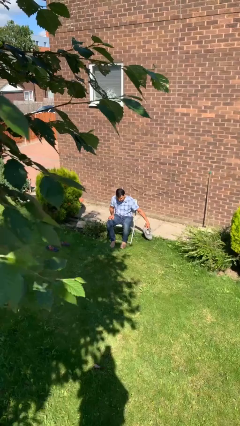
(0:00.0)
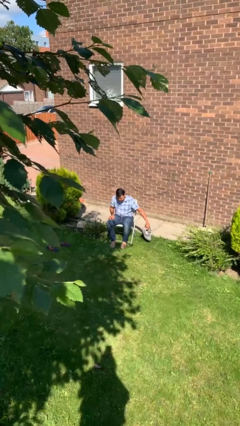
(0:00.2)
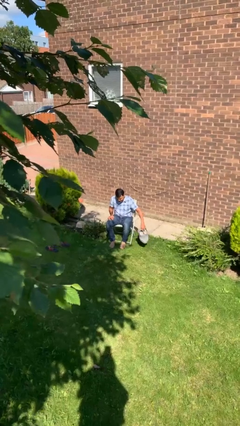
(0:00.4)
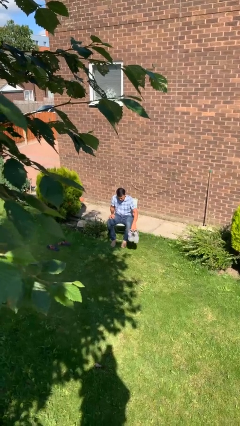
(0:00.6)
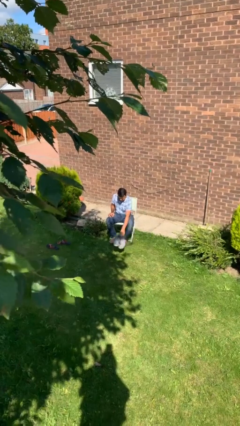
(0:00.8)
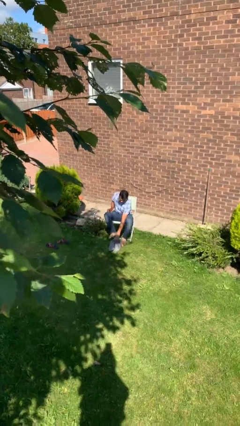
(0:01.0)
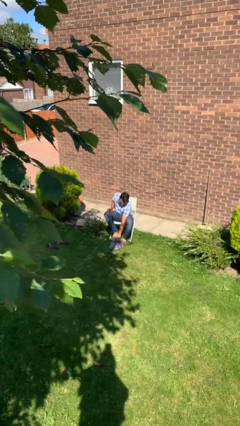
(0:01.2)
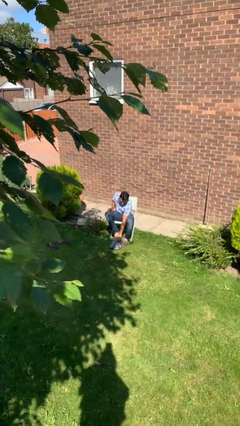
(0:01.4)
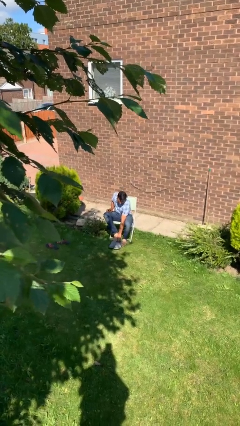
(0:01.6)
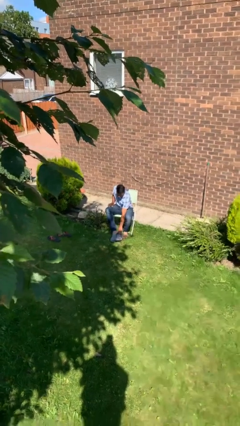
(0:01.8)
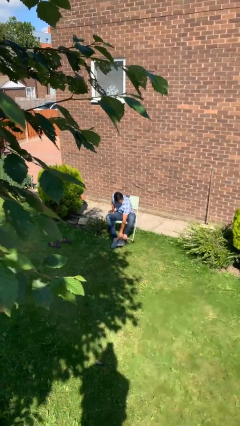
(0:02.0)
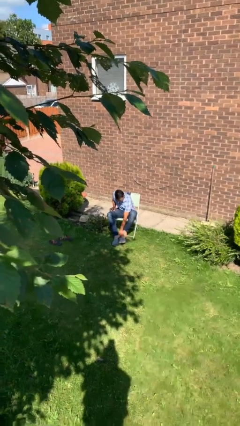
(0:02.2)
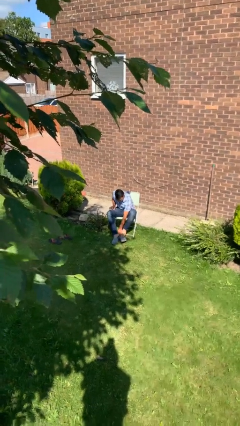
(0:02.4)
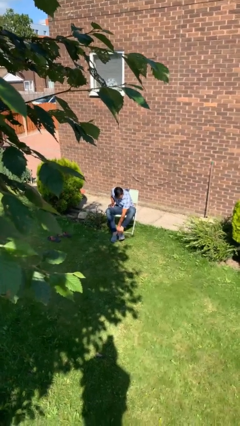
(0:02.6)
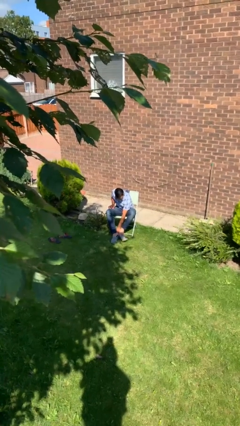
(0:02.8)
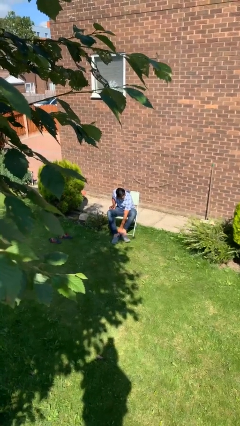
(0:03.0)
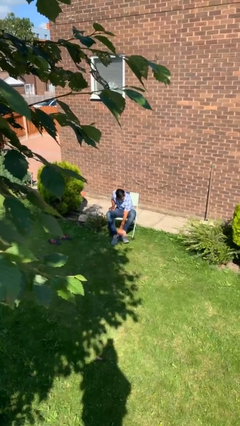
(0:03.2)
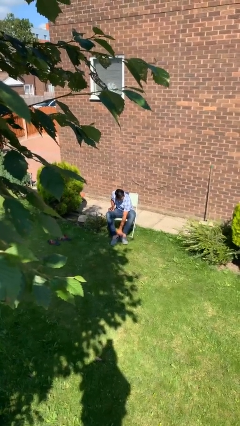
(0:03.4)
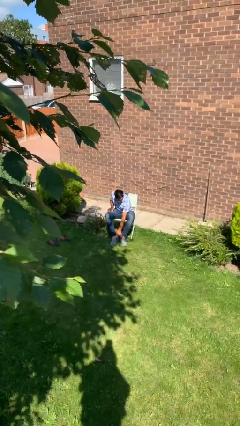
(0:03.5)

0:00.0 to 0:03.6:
person puts on shoes

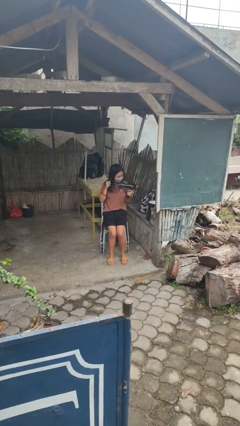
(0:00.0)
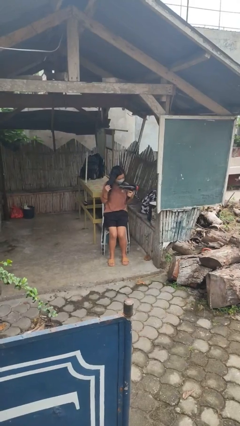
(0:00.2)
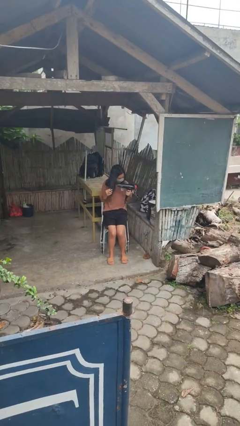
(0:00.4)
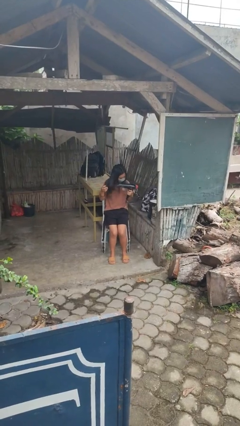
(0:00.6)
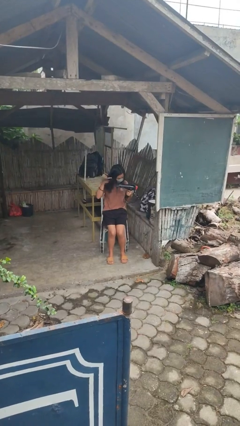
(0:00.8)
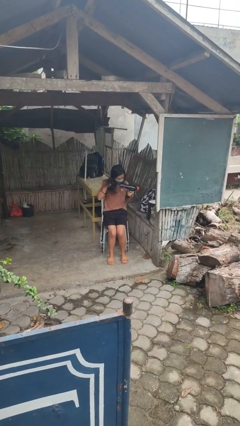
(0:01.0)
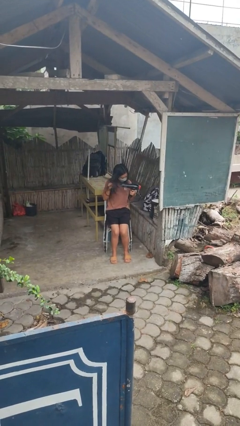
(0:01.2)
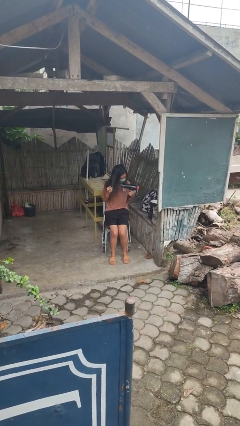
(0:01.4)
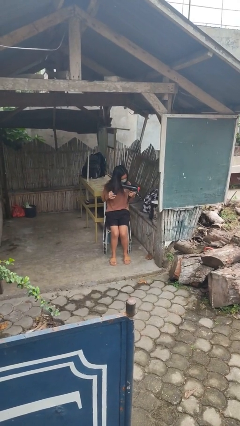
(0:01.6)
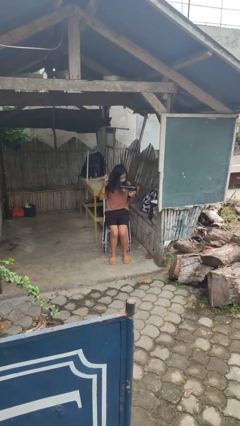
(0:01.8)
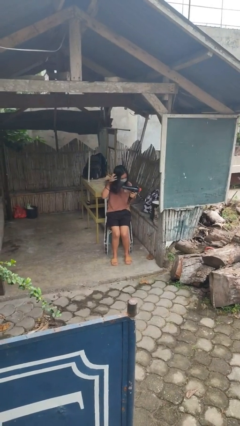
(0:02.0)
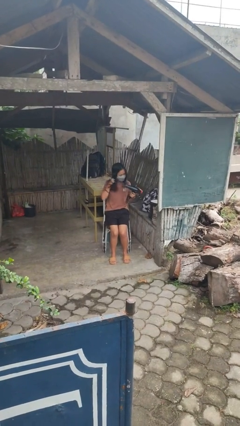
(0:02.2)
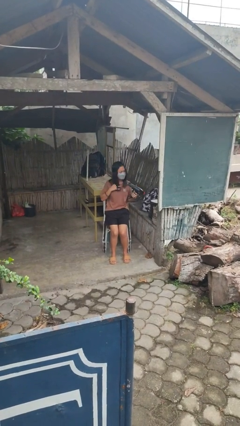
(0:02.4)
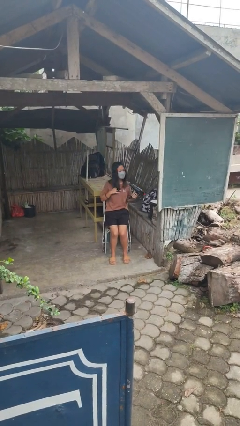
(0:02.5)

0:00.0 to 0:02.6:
person dries hair with hairdryer

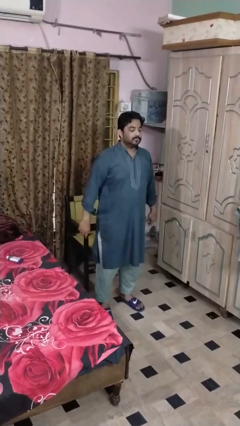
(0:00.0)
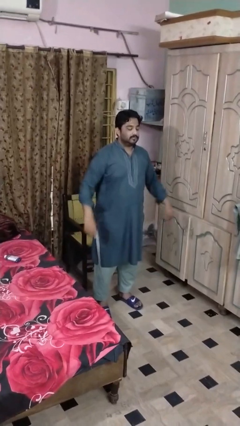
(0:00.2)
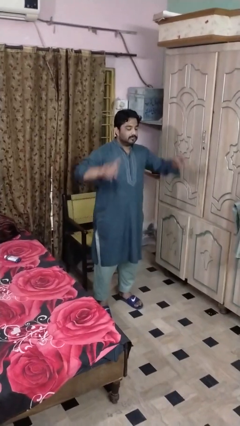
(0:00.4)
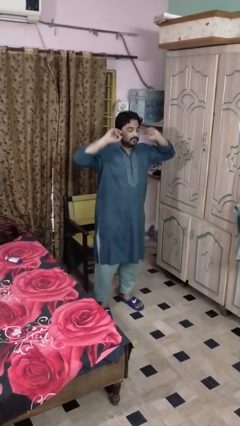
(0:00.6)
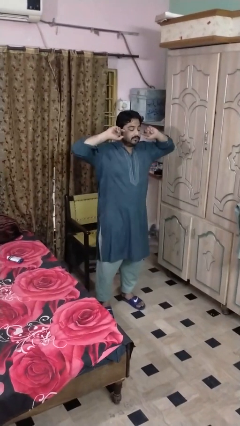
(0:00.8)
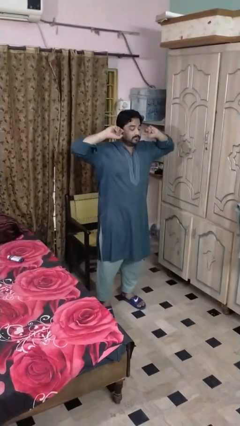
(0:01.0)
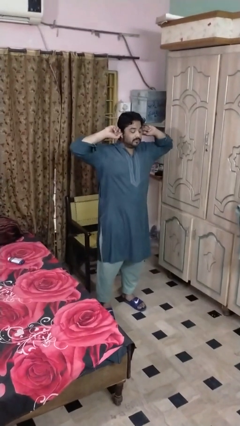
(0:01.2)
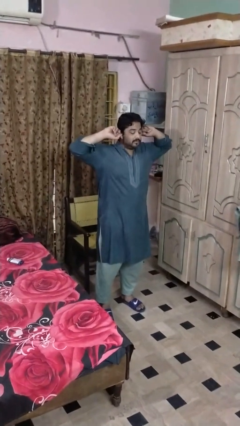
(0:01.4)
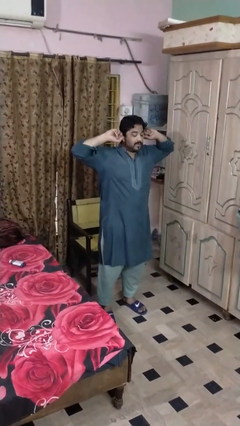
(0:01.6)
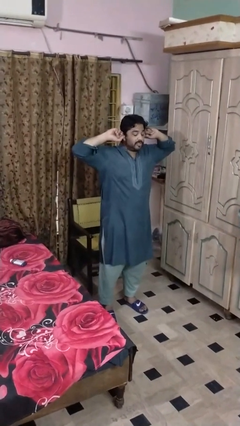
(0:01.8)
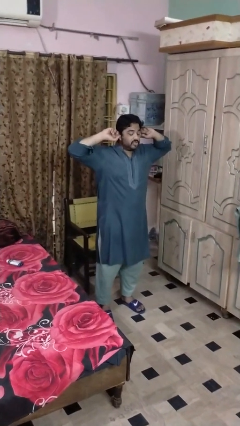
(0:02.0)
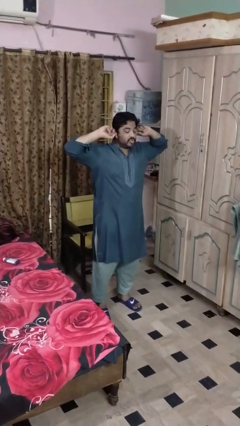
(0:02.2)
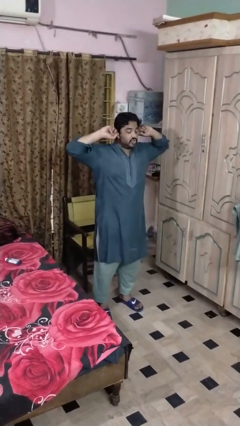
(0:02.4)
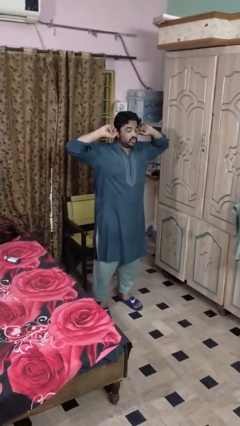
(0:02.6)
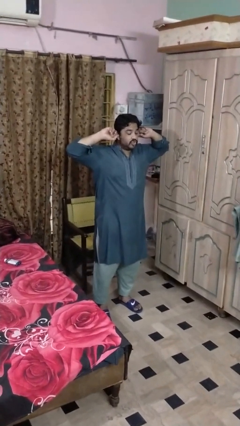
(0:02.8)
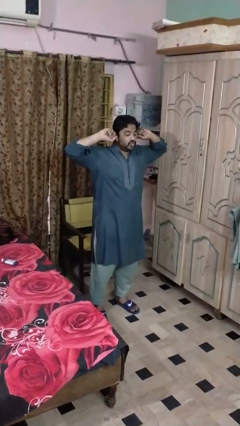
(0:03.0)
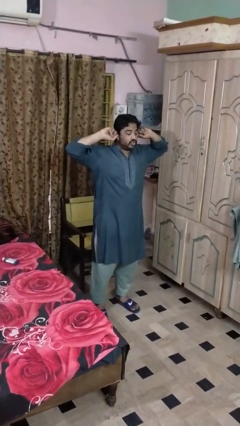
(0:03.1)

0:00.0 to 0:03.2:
person puts fingers in ear

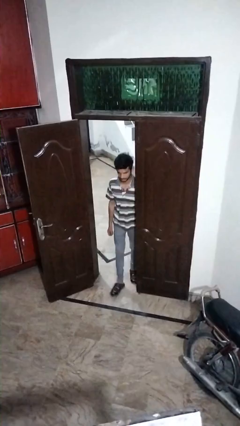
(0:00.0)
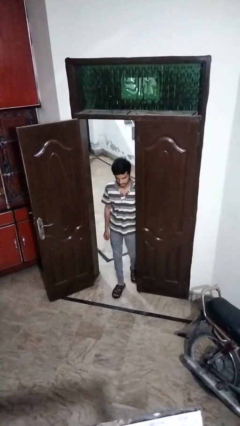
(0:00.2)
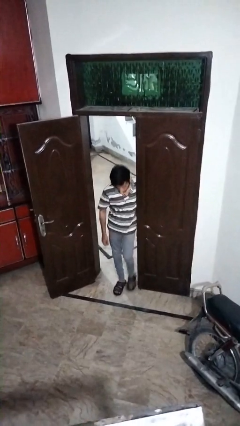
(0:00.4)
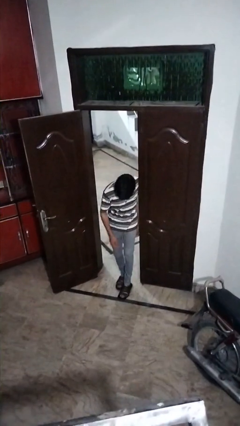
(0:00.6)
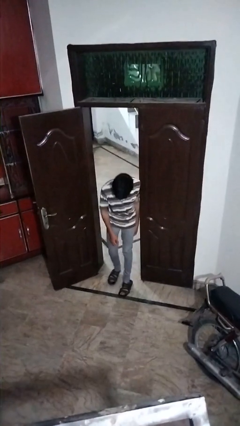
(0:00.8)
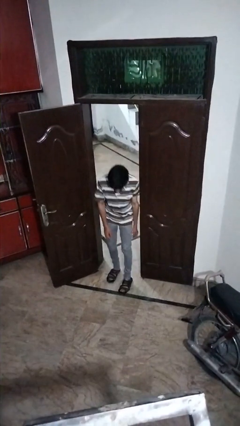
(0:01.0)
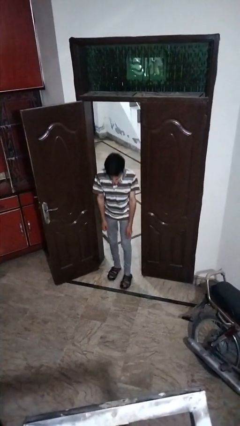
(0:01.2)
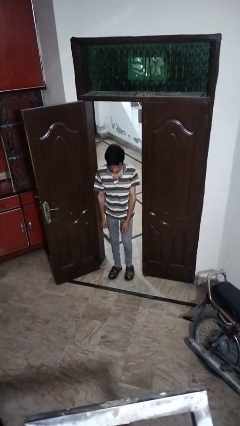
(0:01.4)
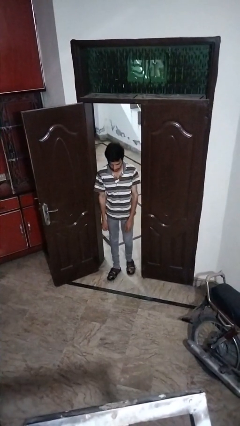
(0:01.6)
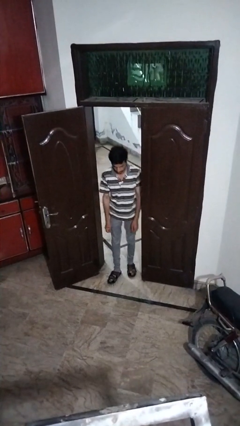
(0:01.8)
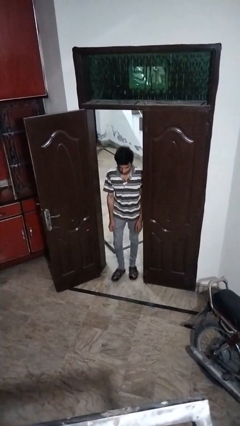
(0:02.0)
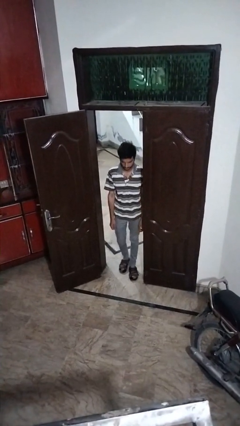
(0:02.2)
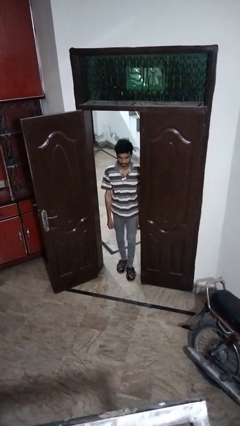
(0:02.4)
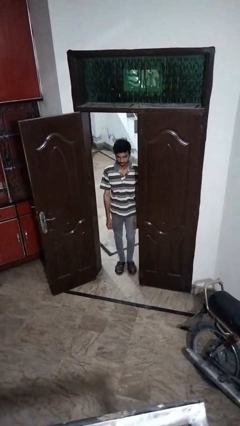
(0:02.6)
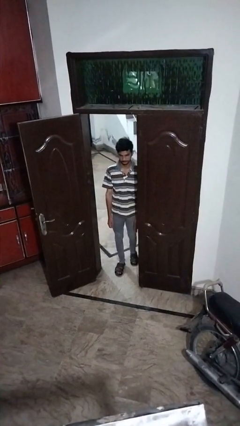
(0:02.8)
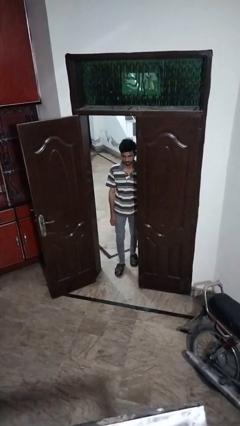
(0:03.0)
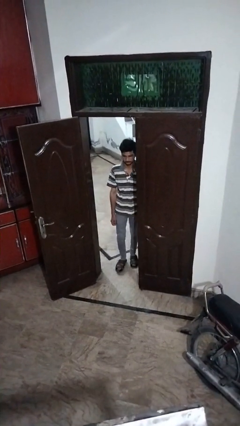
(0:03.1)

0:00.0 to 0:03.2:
person bumps into wall

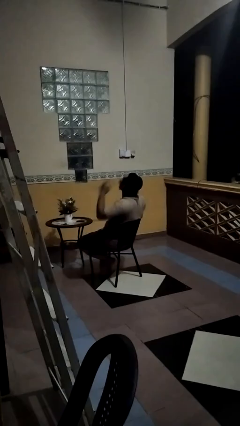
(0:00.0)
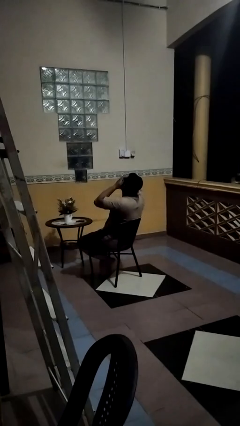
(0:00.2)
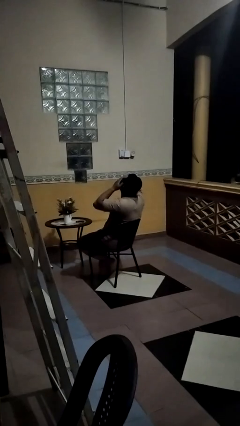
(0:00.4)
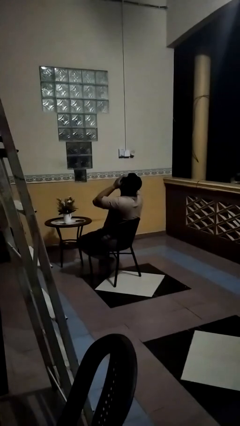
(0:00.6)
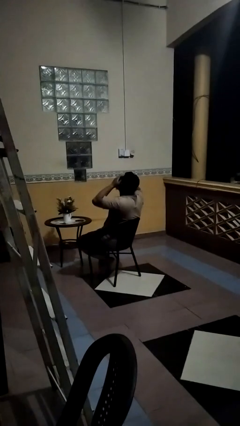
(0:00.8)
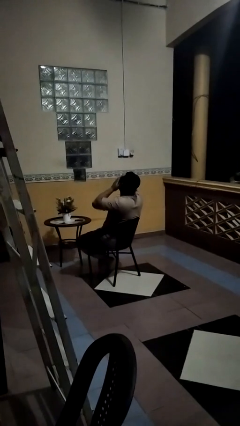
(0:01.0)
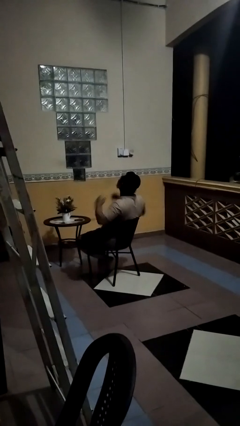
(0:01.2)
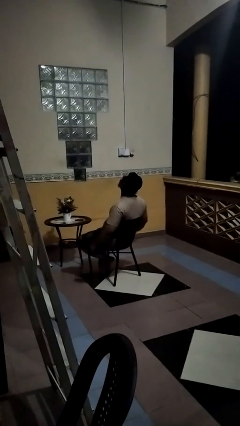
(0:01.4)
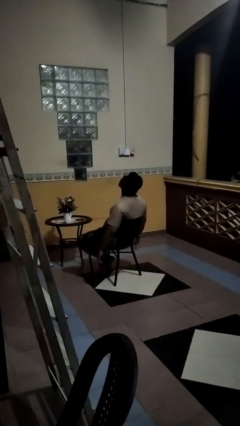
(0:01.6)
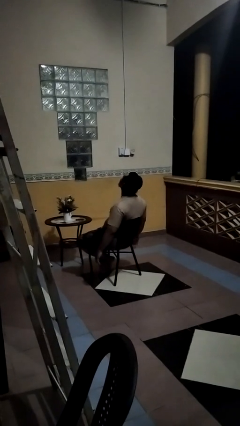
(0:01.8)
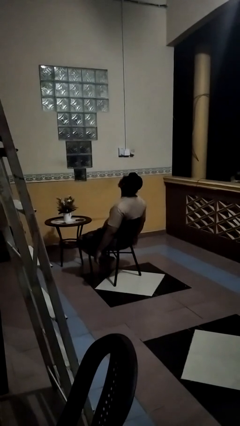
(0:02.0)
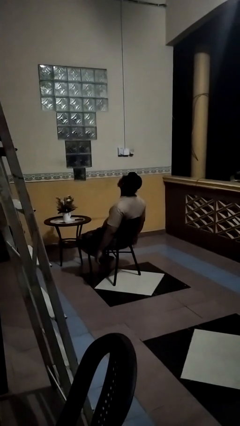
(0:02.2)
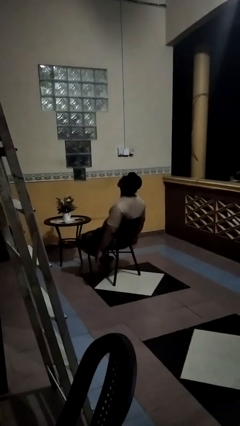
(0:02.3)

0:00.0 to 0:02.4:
person covers face with hands

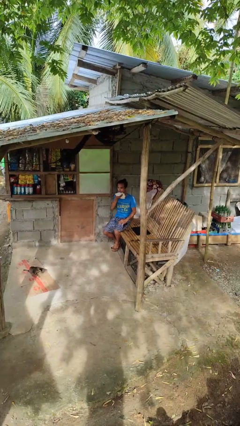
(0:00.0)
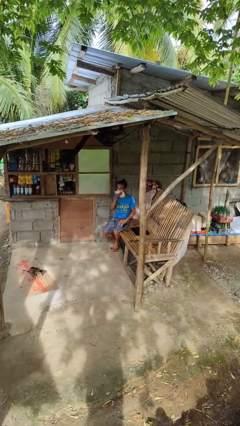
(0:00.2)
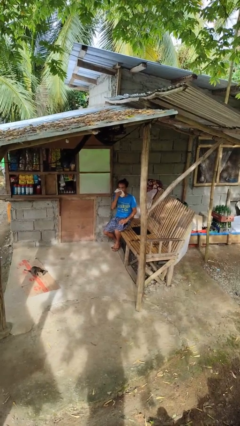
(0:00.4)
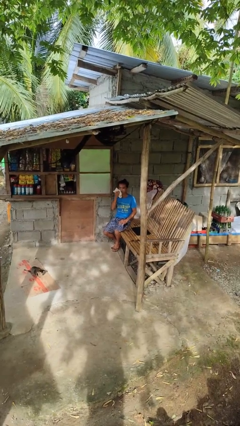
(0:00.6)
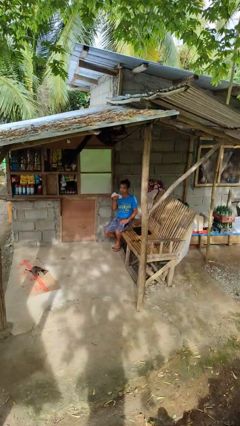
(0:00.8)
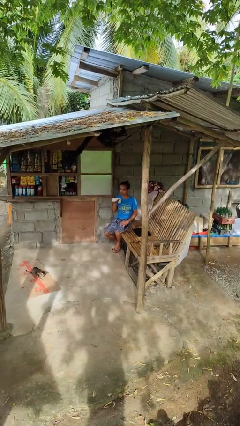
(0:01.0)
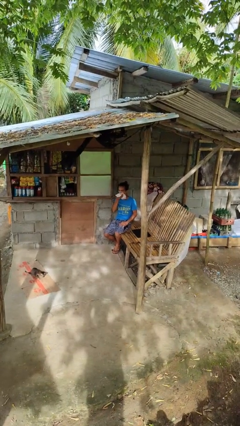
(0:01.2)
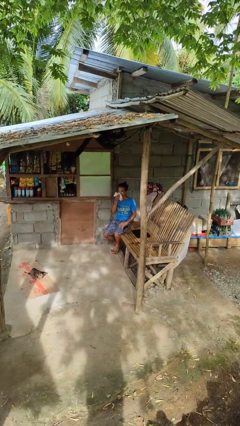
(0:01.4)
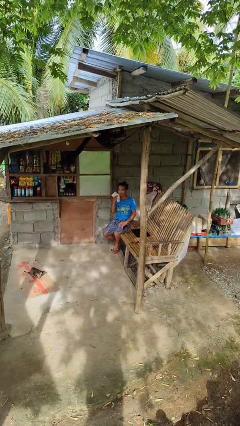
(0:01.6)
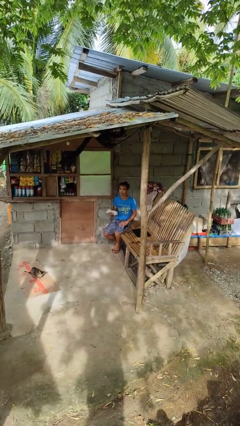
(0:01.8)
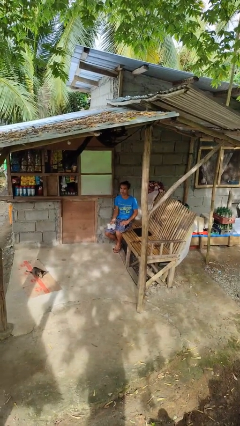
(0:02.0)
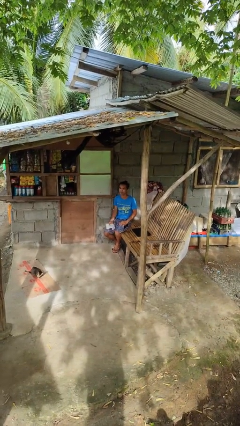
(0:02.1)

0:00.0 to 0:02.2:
person wipes mouth with napkin
